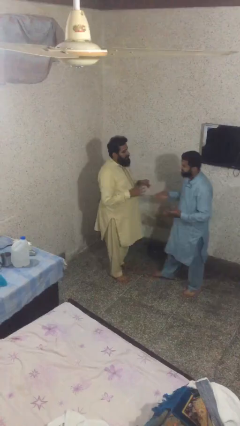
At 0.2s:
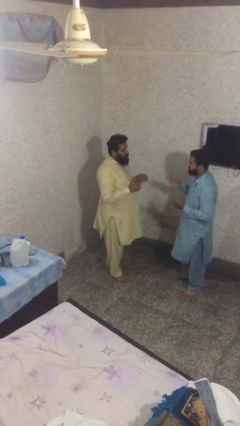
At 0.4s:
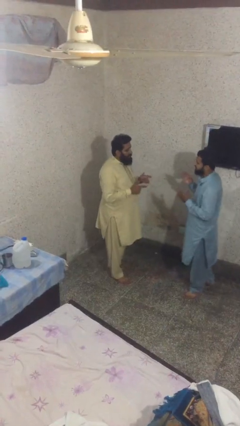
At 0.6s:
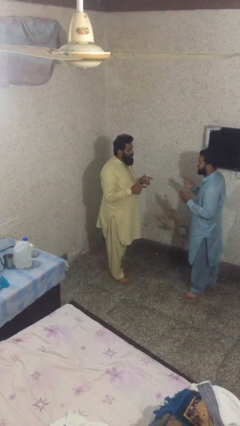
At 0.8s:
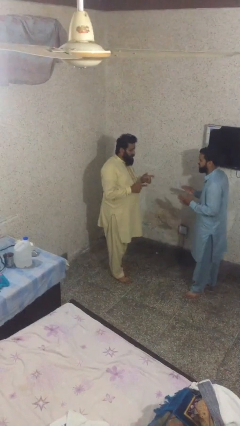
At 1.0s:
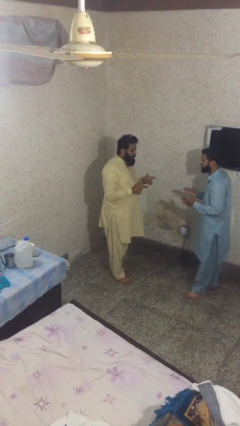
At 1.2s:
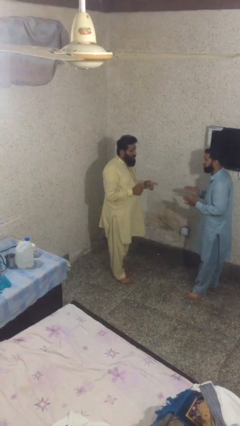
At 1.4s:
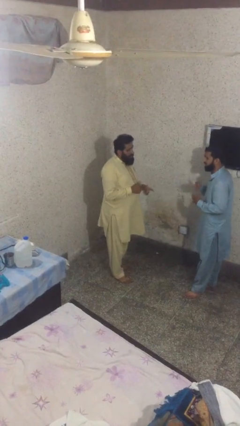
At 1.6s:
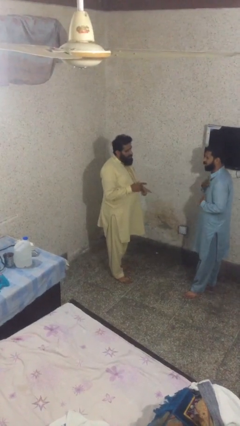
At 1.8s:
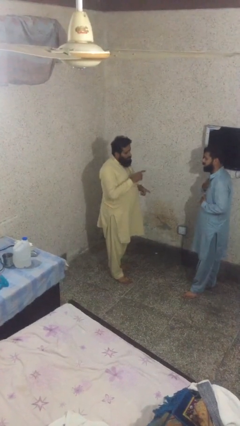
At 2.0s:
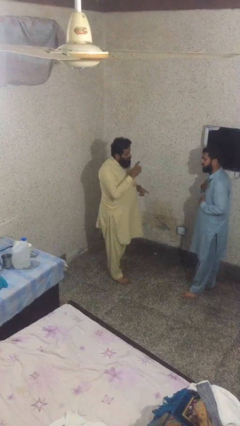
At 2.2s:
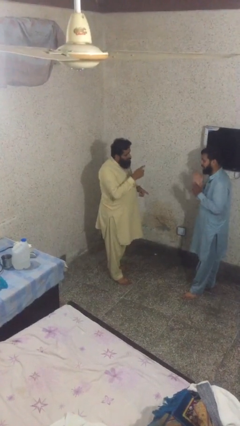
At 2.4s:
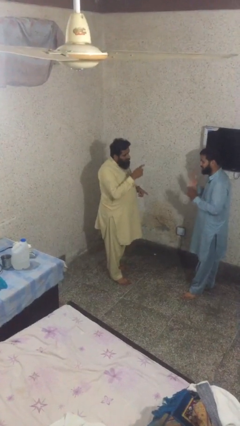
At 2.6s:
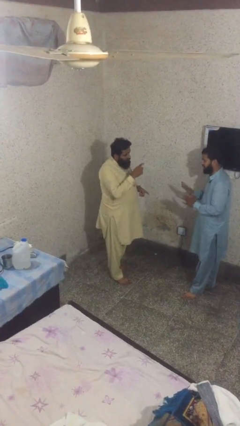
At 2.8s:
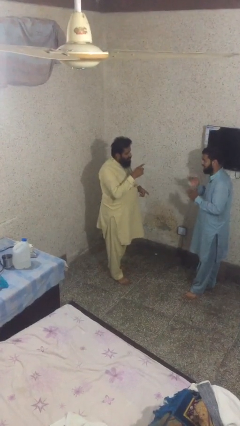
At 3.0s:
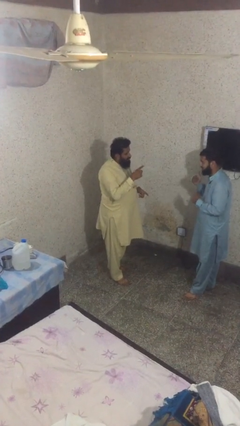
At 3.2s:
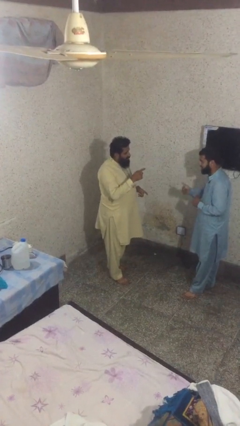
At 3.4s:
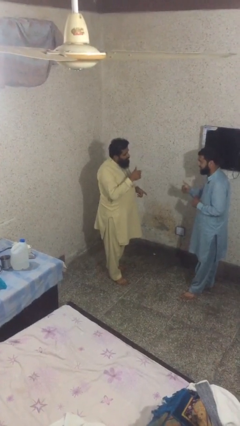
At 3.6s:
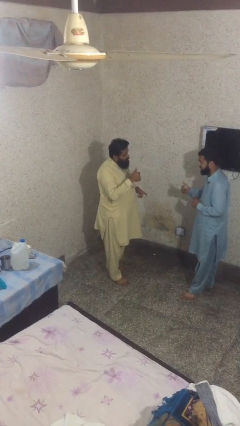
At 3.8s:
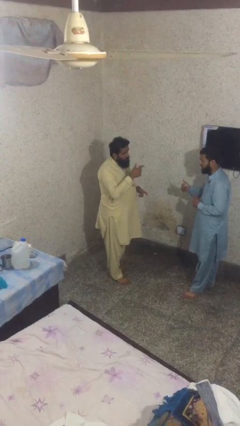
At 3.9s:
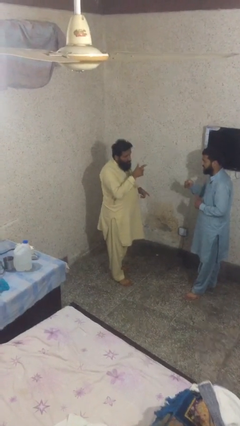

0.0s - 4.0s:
person talks to person

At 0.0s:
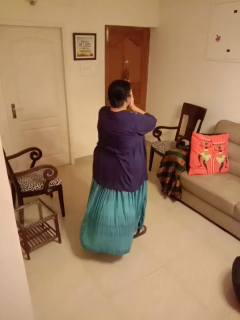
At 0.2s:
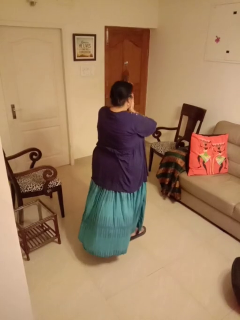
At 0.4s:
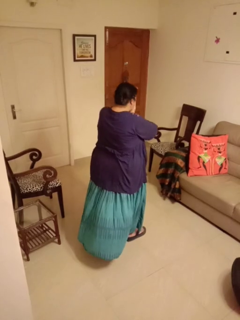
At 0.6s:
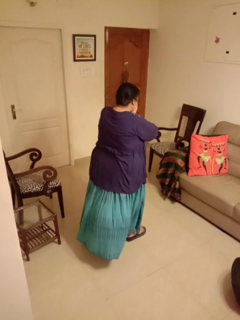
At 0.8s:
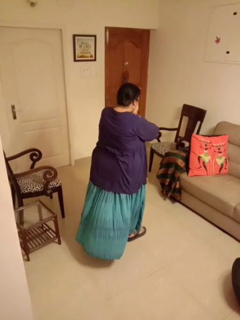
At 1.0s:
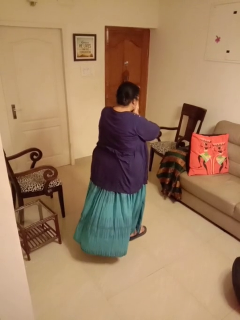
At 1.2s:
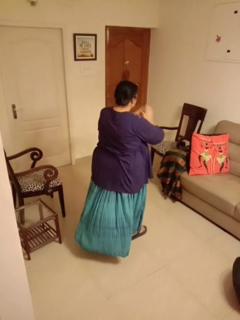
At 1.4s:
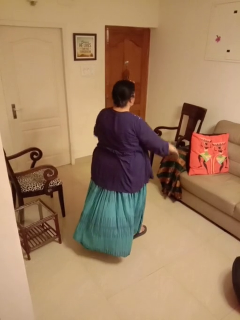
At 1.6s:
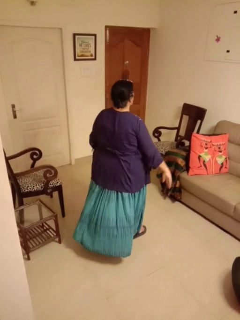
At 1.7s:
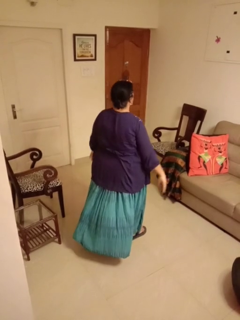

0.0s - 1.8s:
person sneezes into hand

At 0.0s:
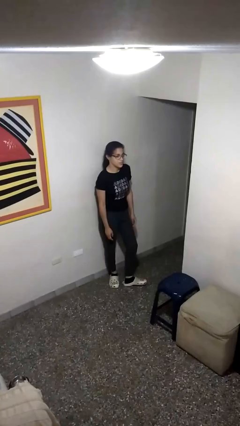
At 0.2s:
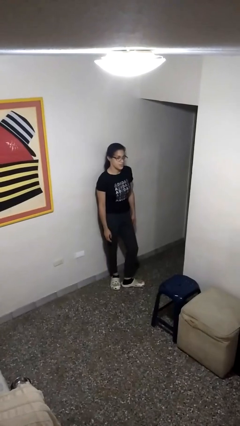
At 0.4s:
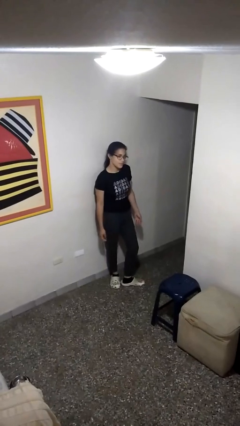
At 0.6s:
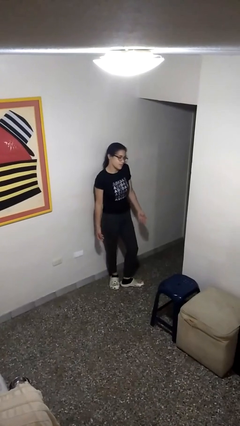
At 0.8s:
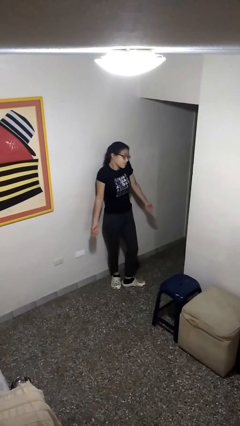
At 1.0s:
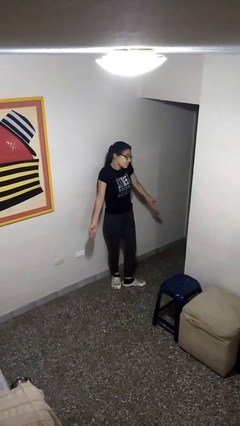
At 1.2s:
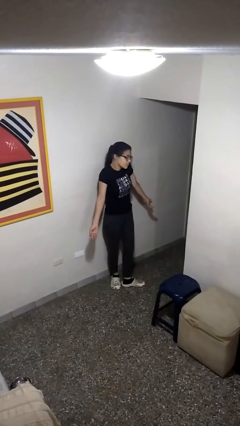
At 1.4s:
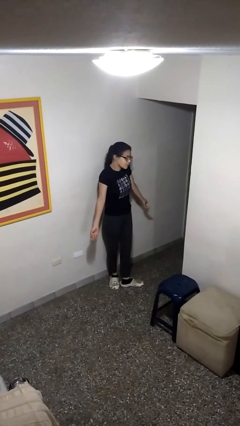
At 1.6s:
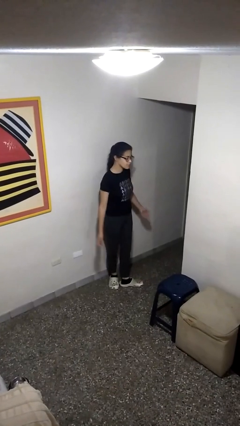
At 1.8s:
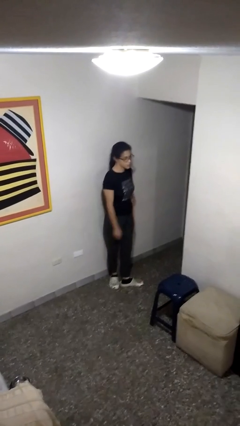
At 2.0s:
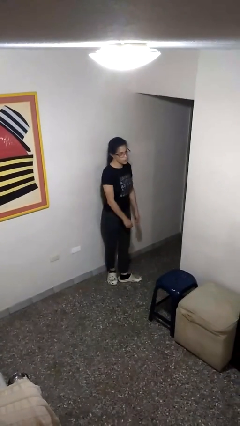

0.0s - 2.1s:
person shrugs

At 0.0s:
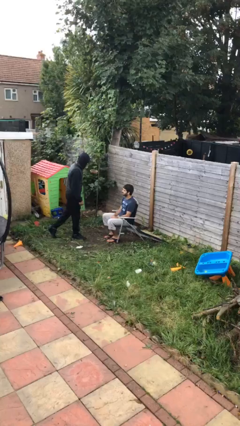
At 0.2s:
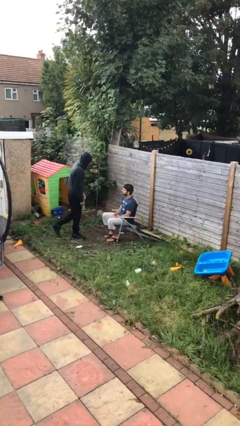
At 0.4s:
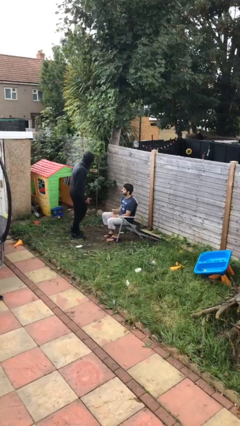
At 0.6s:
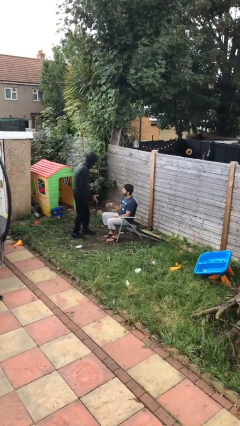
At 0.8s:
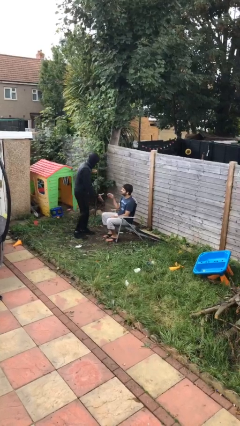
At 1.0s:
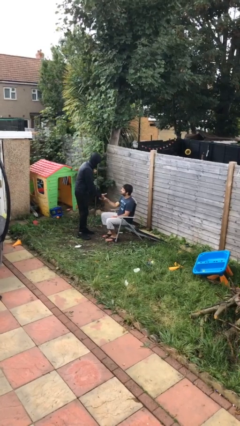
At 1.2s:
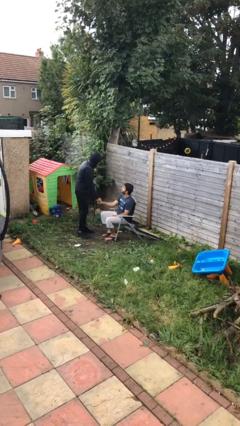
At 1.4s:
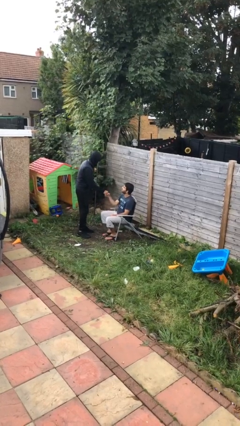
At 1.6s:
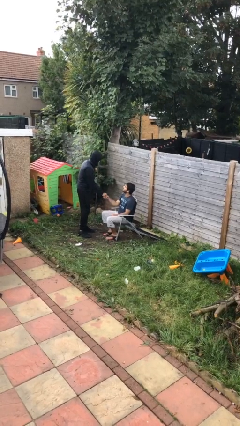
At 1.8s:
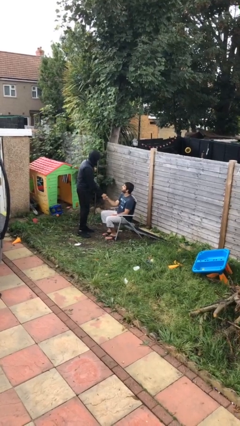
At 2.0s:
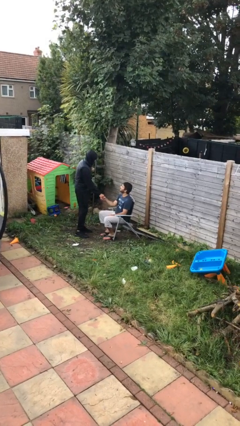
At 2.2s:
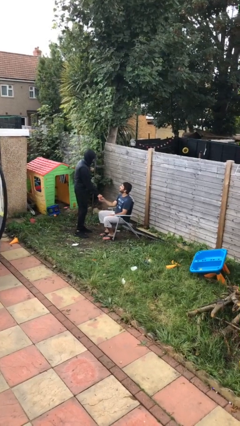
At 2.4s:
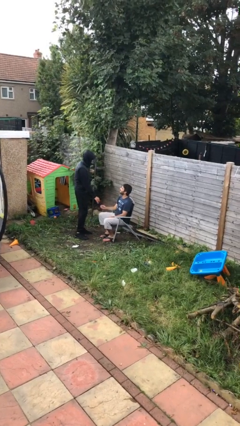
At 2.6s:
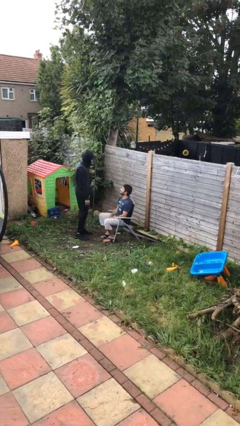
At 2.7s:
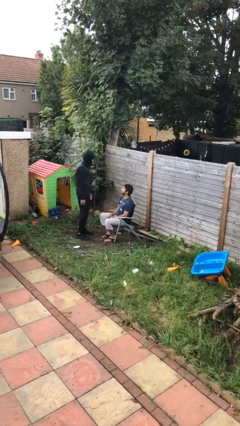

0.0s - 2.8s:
person shakes hand

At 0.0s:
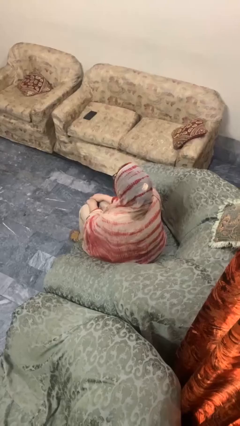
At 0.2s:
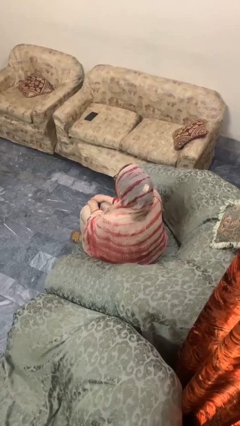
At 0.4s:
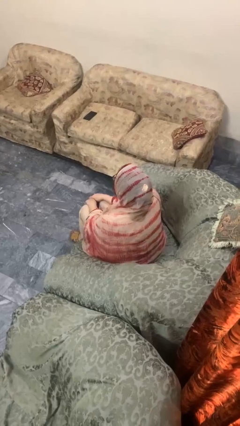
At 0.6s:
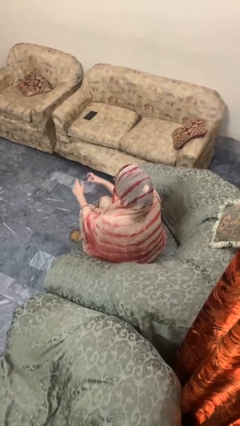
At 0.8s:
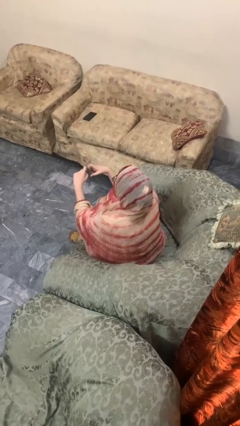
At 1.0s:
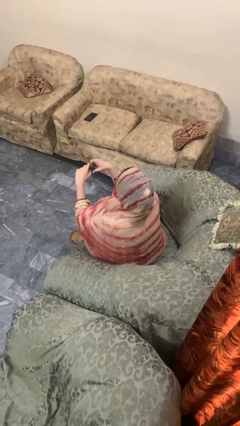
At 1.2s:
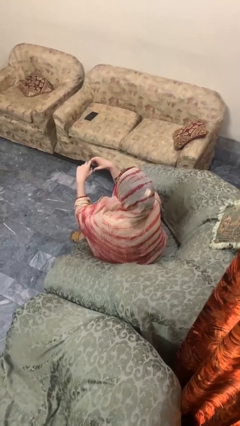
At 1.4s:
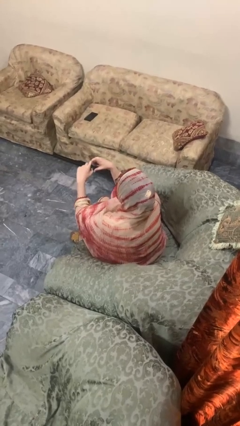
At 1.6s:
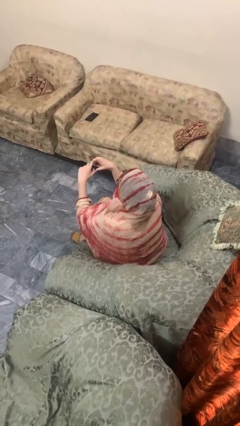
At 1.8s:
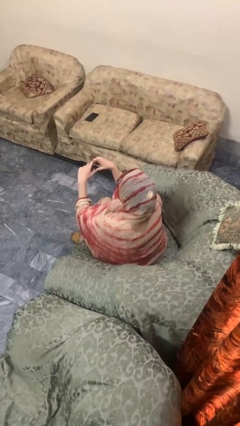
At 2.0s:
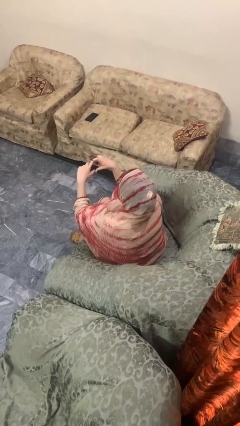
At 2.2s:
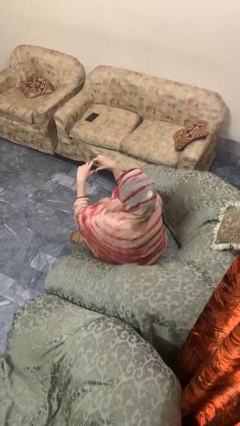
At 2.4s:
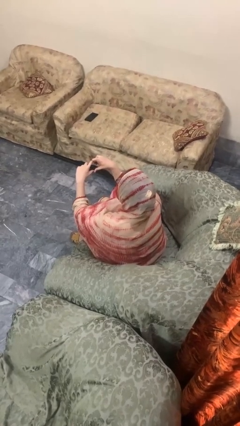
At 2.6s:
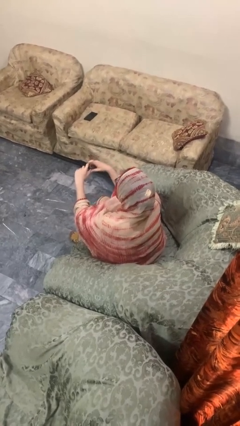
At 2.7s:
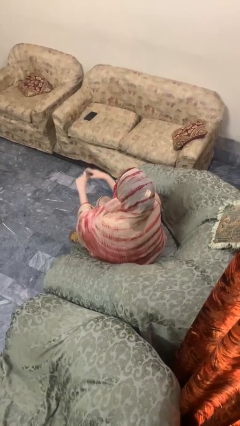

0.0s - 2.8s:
person gestures heart

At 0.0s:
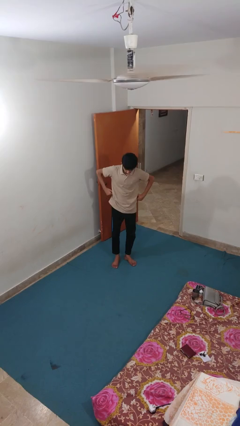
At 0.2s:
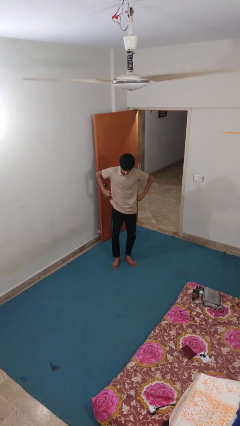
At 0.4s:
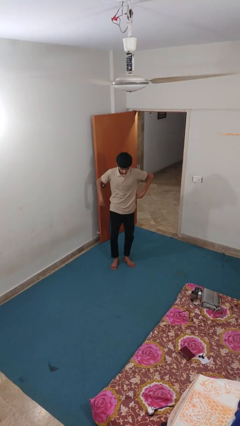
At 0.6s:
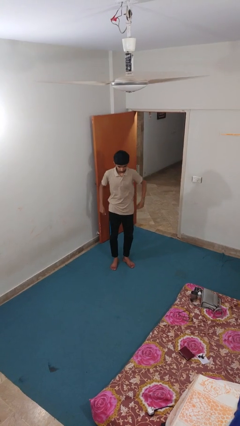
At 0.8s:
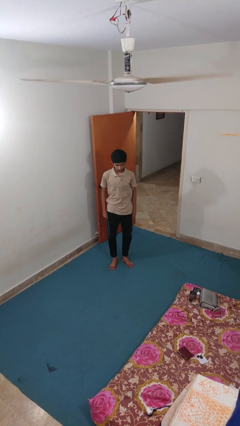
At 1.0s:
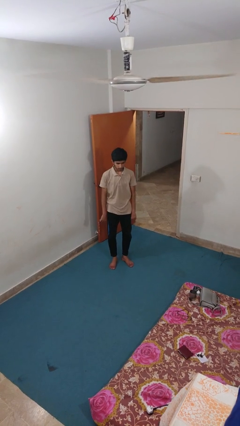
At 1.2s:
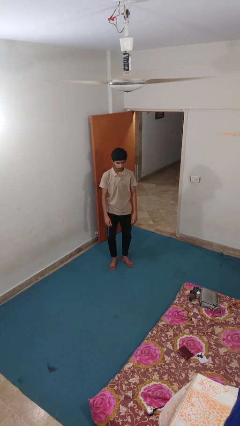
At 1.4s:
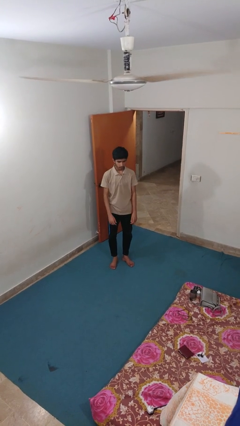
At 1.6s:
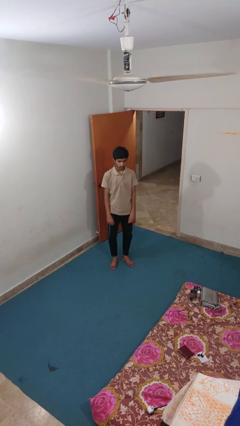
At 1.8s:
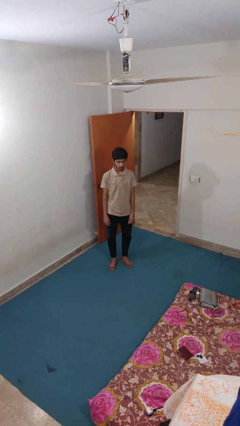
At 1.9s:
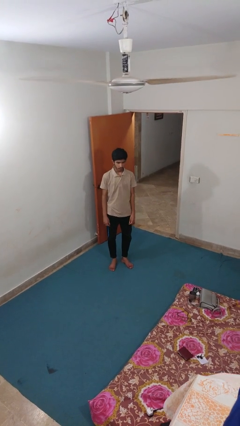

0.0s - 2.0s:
person hikes up pants

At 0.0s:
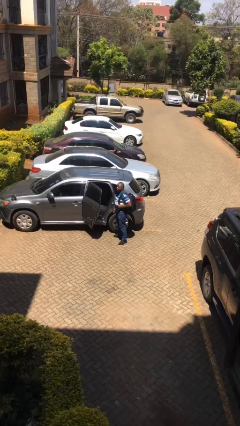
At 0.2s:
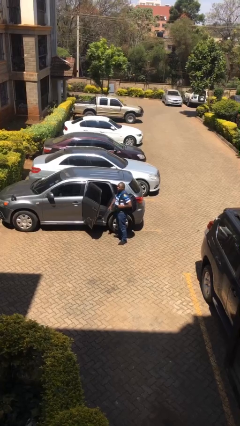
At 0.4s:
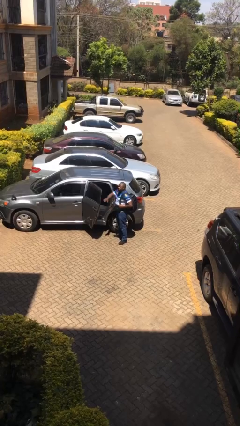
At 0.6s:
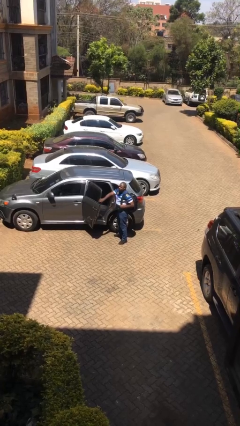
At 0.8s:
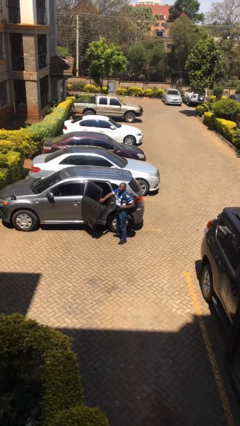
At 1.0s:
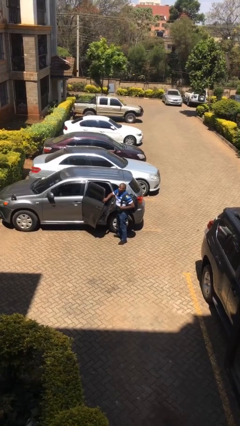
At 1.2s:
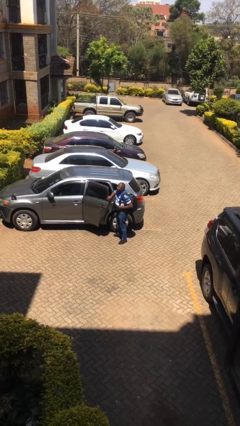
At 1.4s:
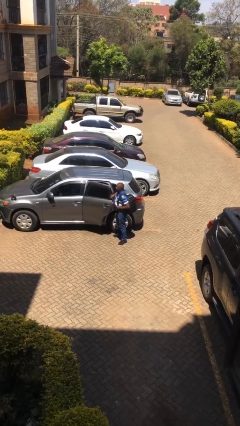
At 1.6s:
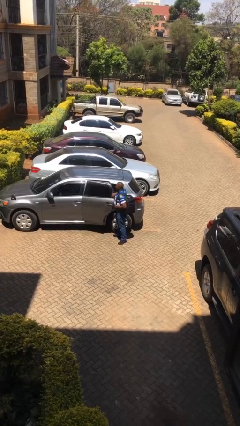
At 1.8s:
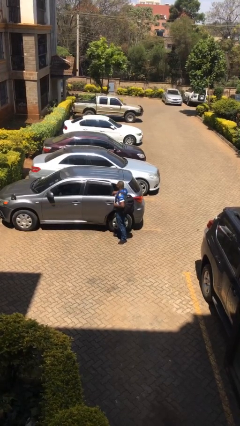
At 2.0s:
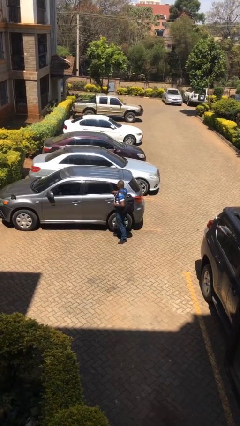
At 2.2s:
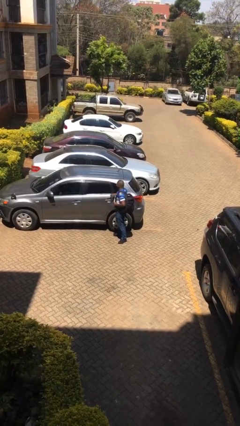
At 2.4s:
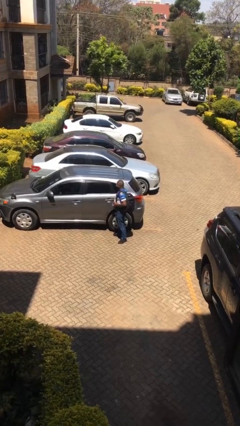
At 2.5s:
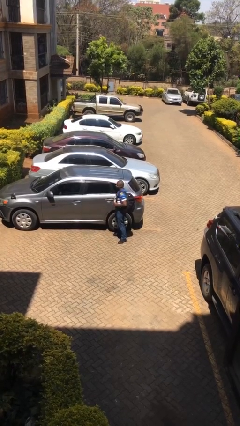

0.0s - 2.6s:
person closes car door
